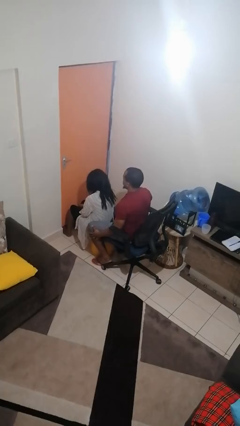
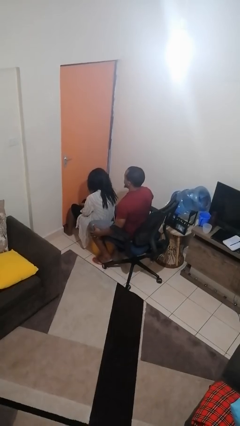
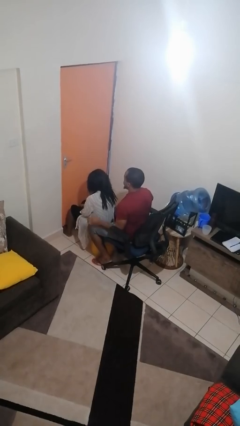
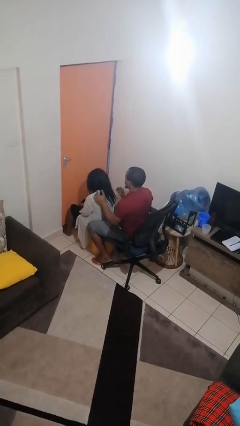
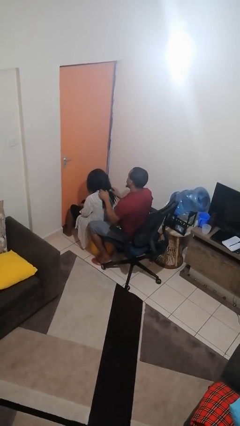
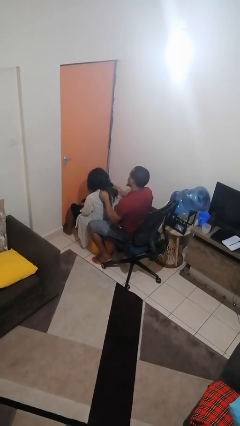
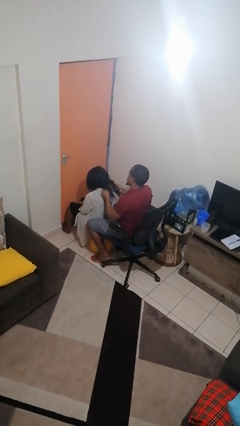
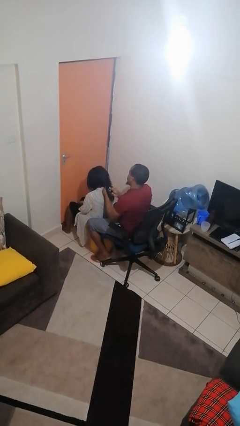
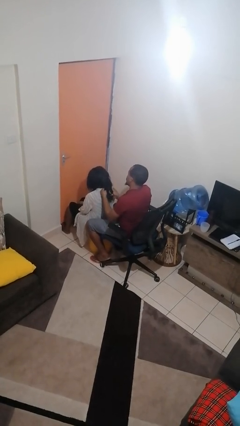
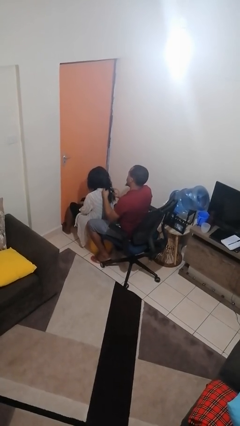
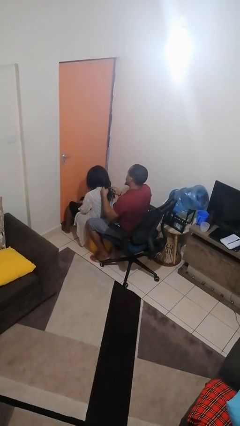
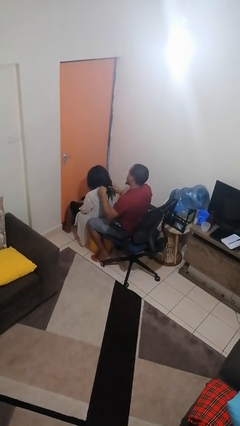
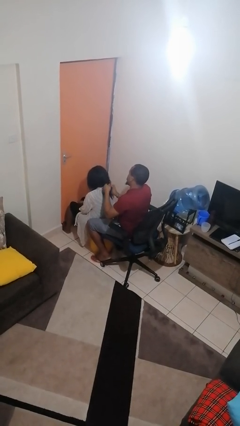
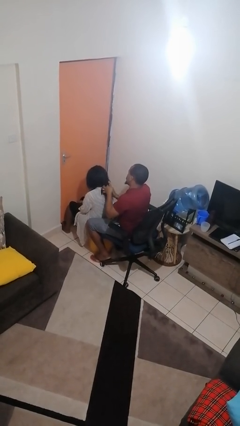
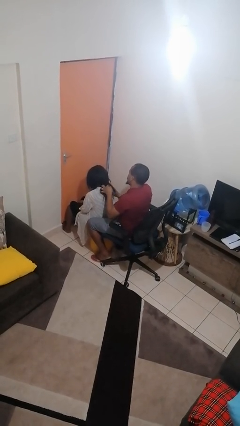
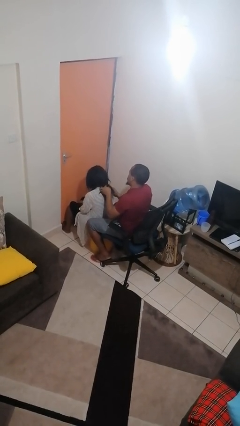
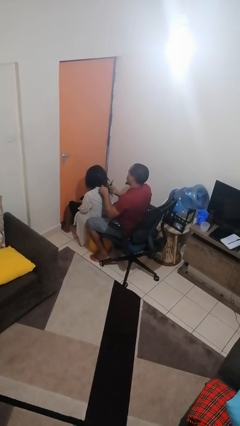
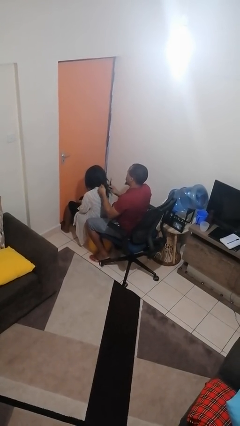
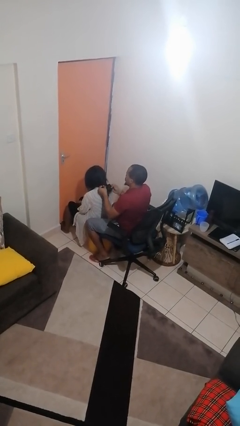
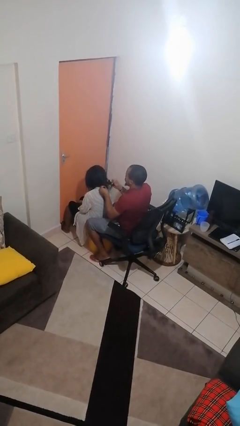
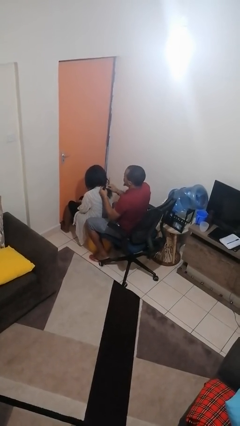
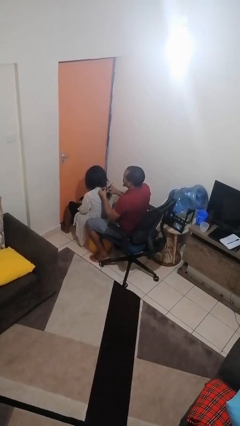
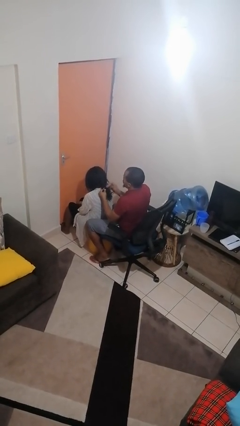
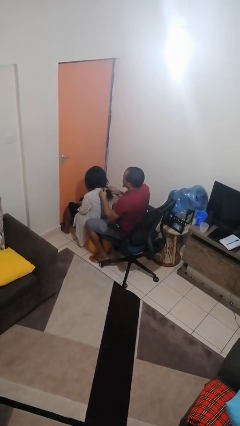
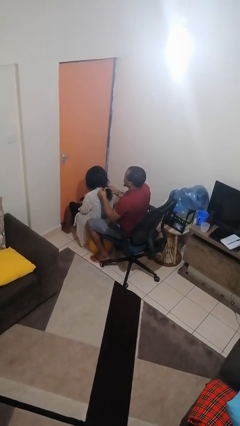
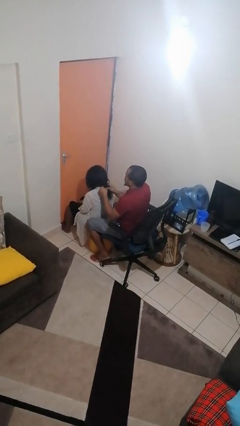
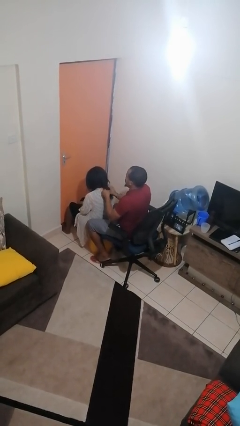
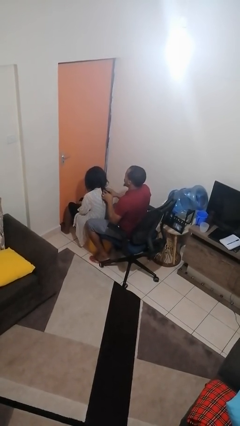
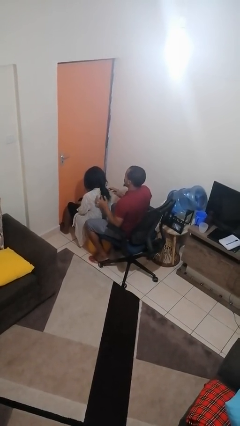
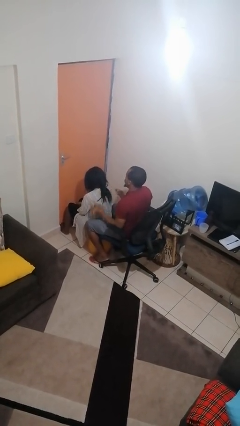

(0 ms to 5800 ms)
person braids hair of person

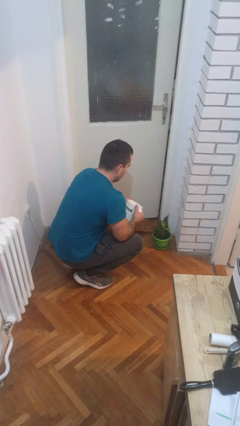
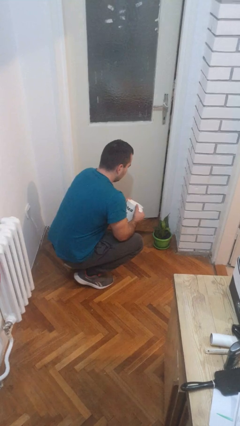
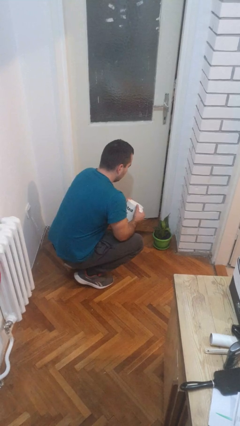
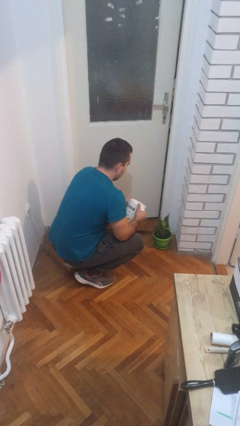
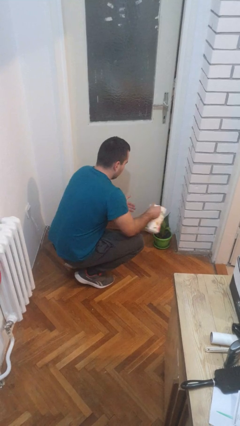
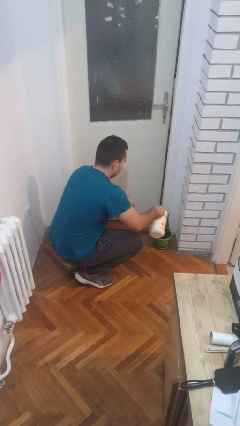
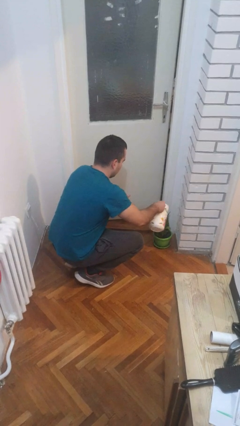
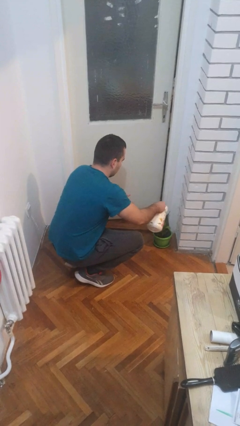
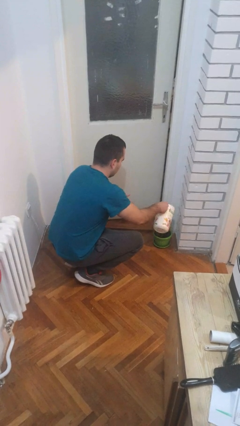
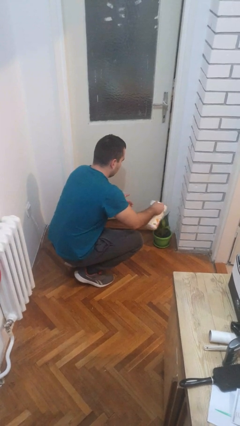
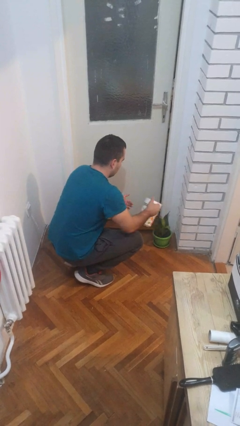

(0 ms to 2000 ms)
person waters houseplant

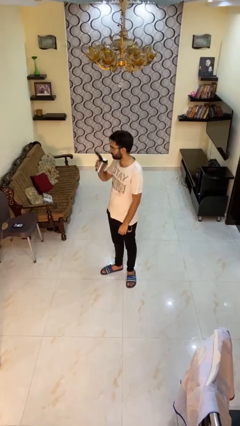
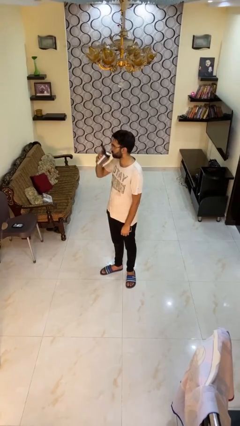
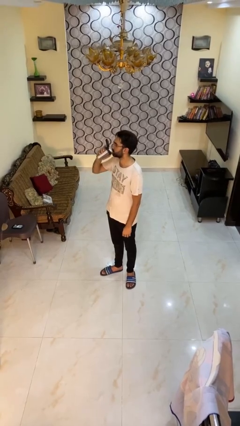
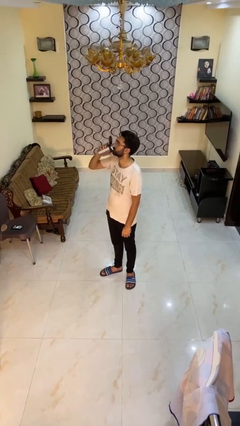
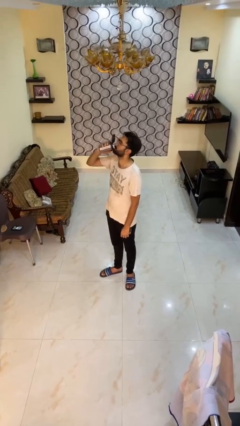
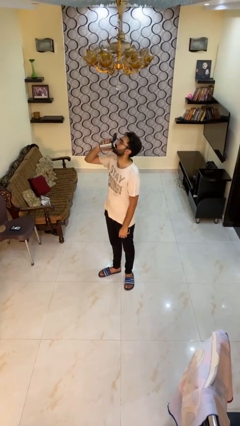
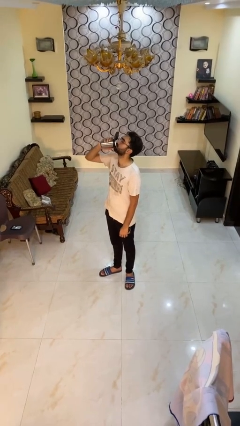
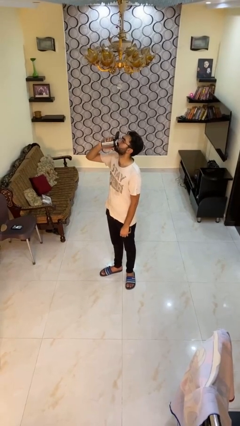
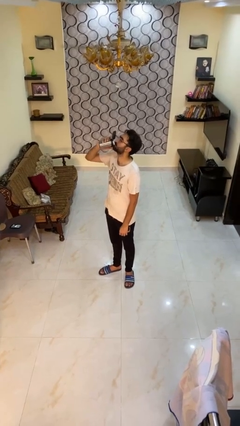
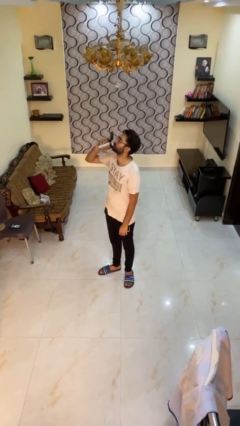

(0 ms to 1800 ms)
person drinks from beverage can

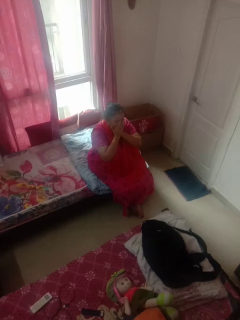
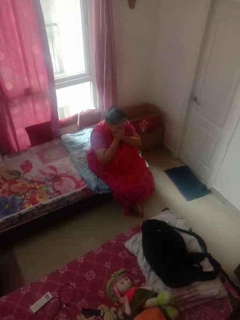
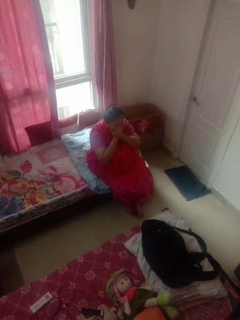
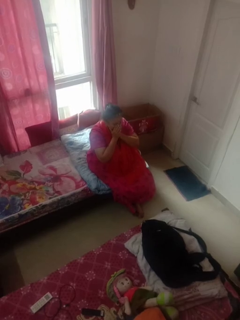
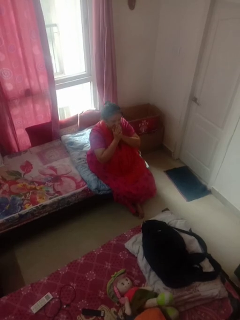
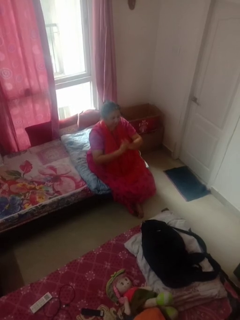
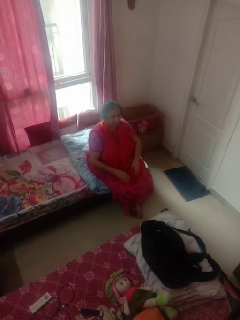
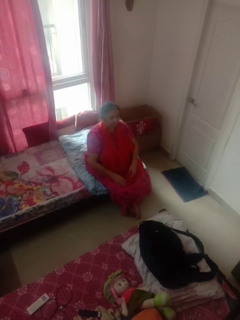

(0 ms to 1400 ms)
person sneezes into hand

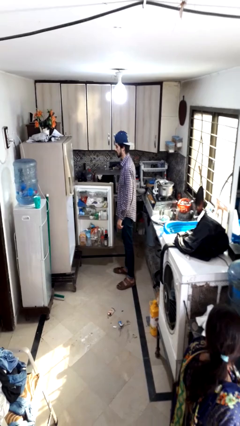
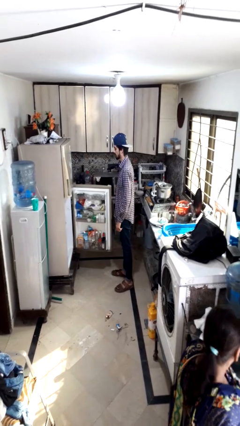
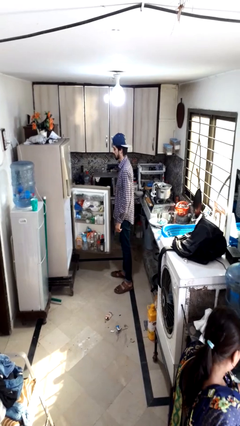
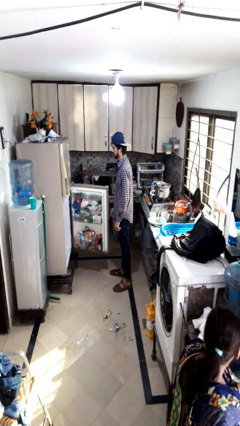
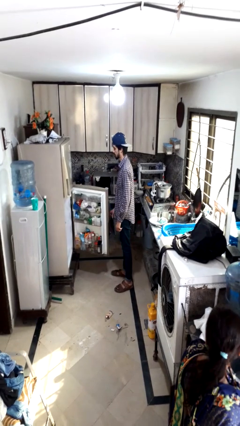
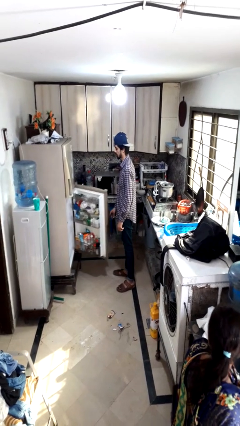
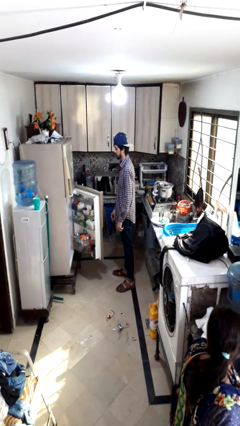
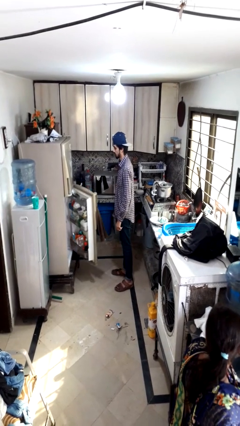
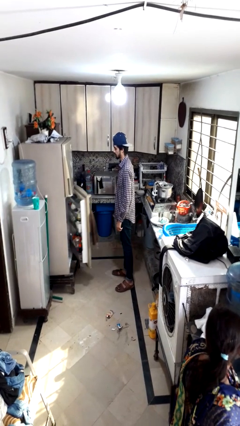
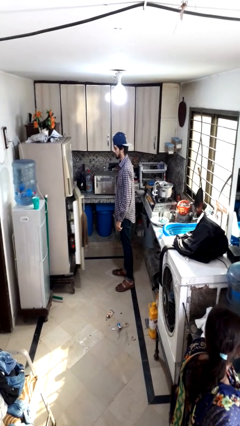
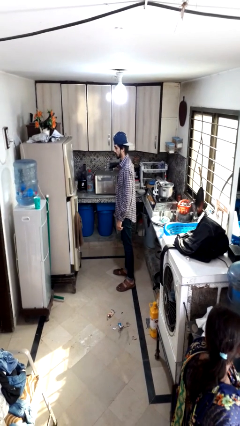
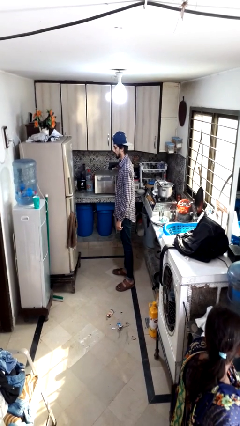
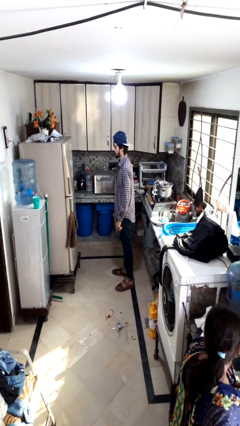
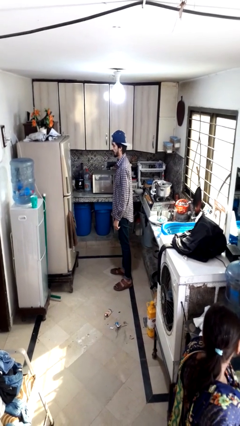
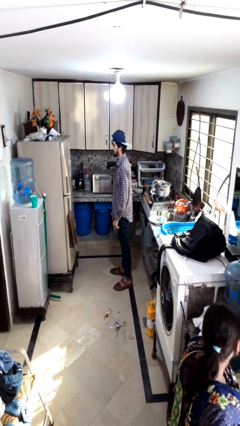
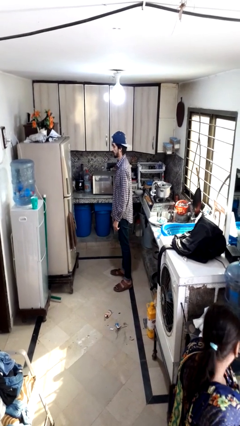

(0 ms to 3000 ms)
person closes refrigerator

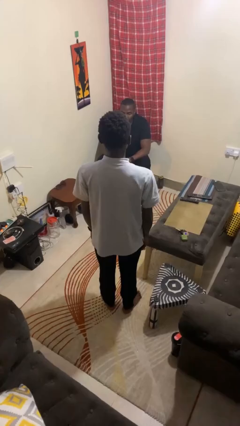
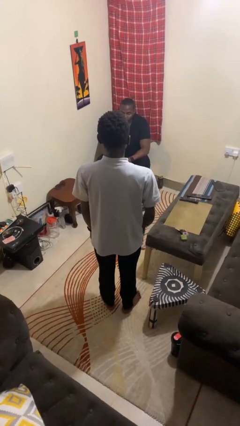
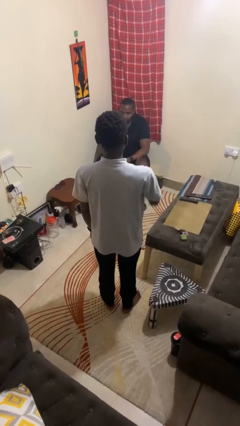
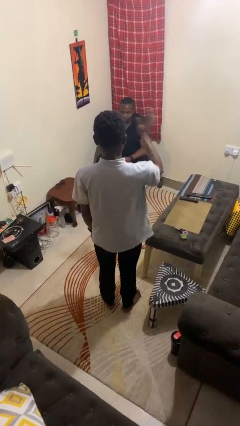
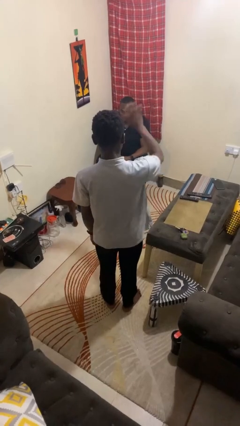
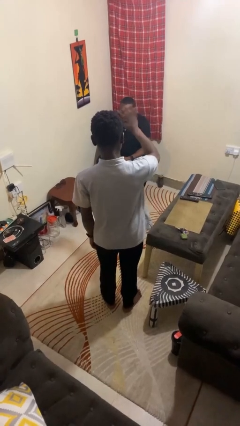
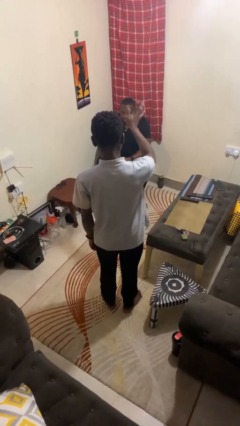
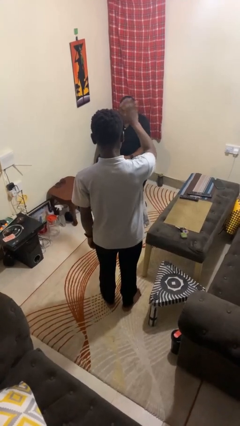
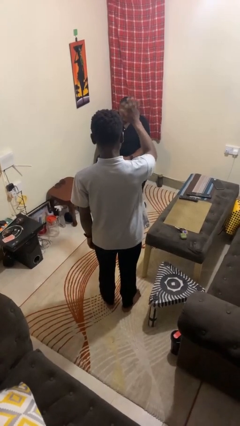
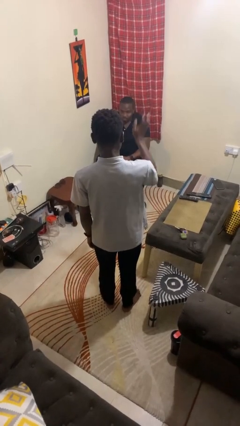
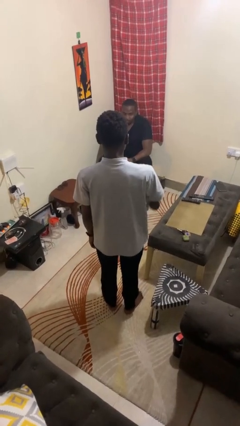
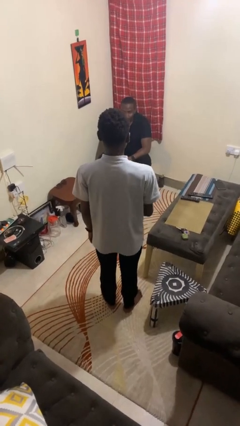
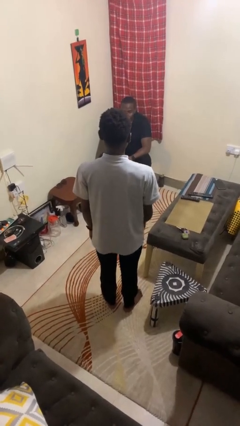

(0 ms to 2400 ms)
person waves at person

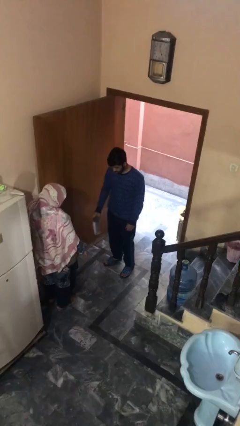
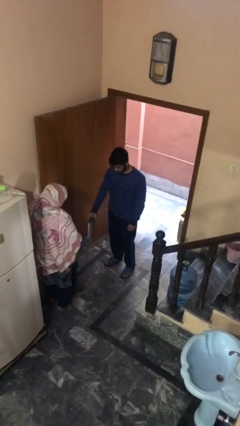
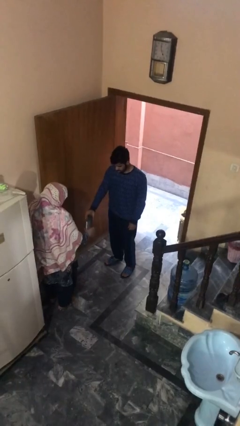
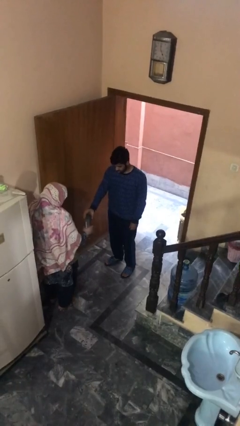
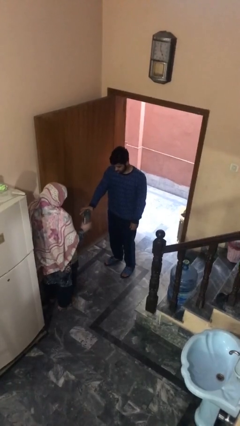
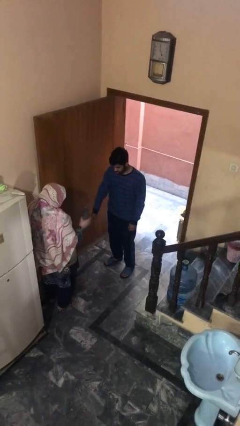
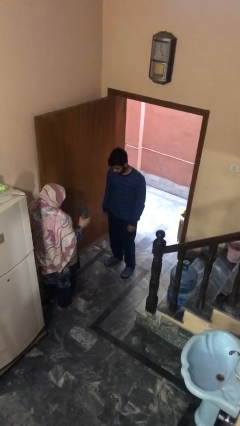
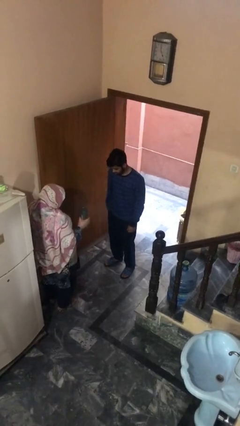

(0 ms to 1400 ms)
person transfers object to person
